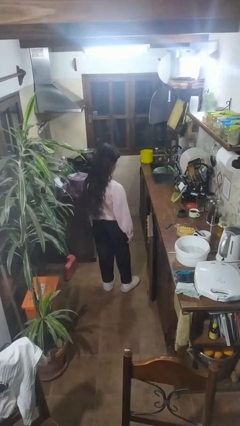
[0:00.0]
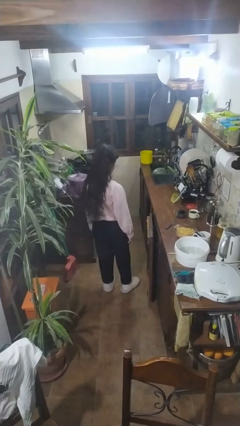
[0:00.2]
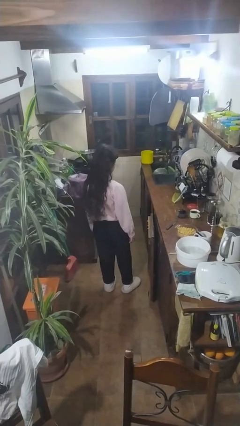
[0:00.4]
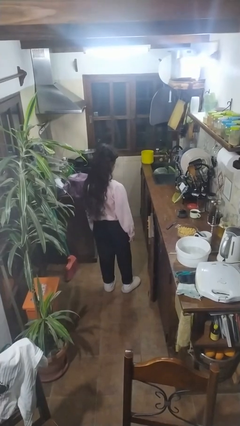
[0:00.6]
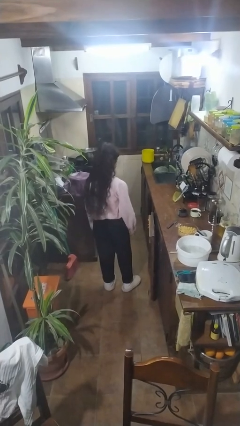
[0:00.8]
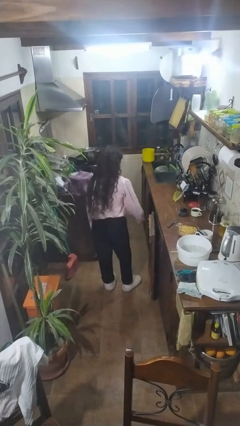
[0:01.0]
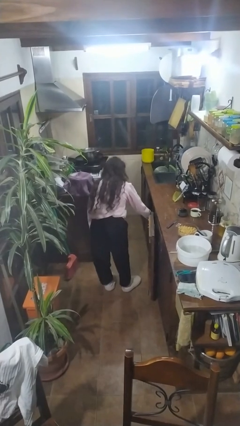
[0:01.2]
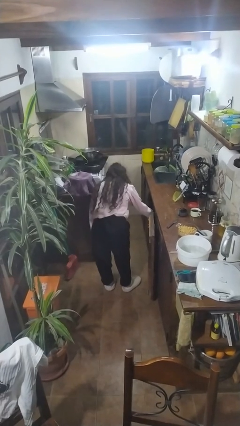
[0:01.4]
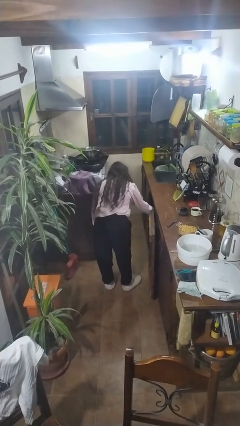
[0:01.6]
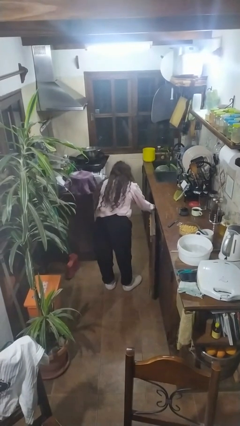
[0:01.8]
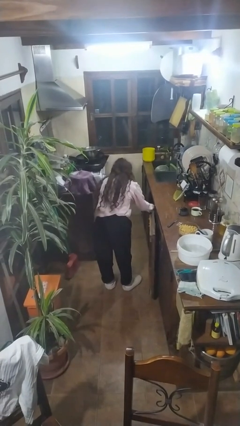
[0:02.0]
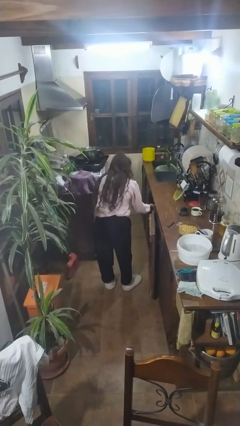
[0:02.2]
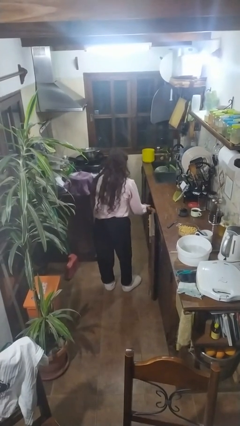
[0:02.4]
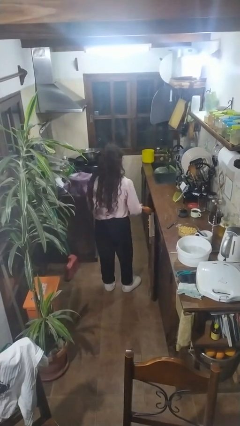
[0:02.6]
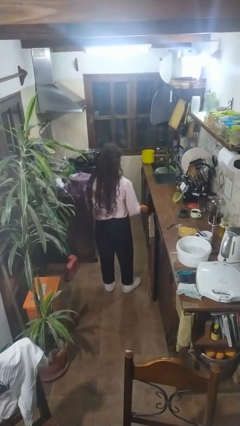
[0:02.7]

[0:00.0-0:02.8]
person takes object from cabinet

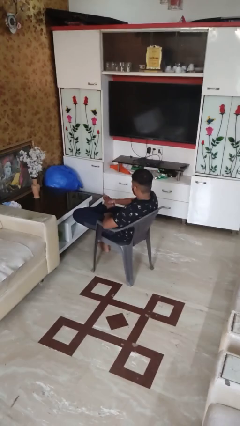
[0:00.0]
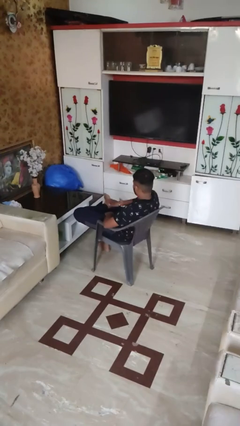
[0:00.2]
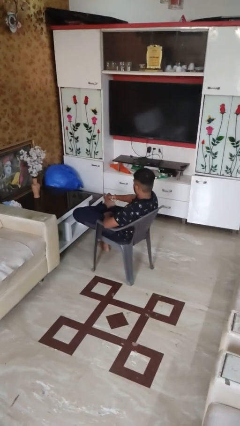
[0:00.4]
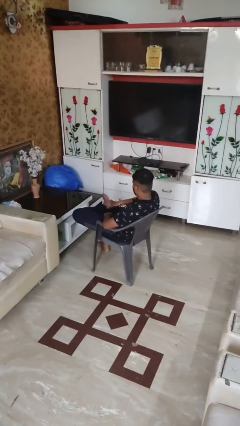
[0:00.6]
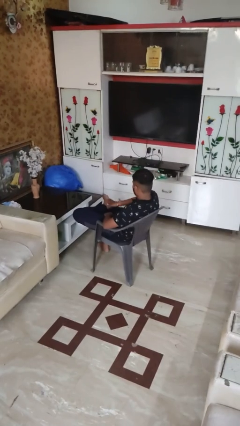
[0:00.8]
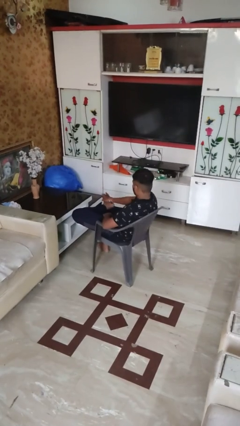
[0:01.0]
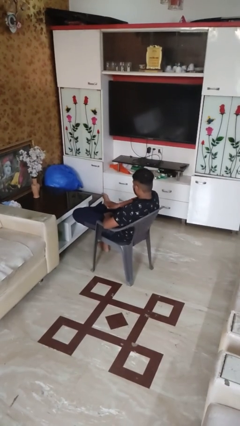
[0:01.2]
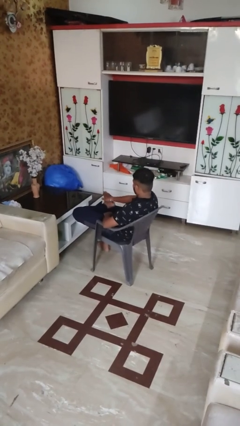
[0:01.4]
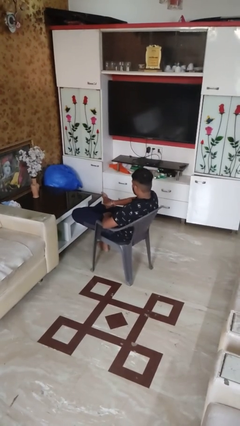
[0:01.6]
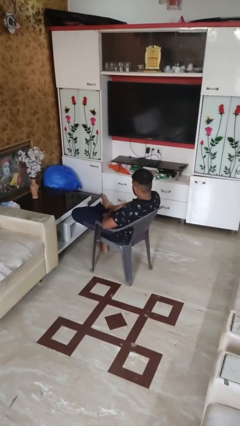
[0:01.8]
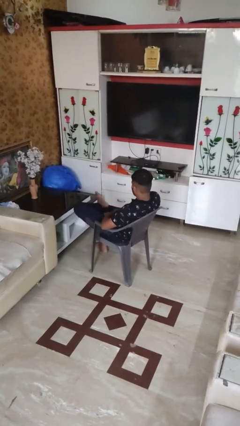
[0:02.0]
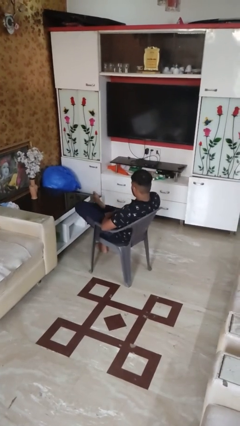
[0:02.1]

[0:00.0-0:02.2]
person rubs foot

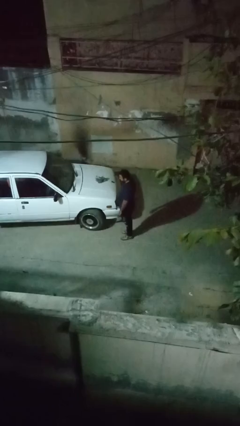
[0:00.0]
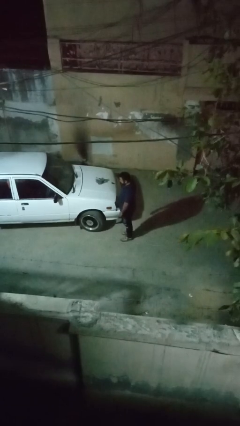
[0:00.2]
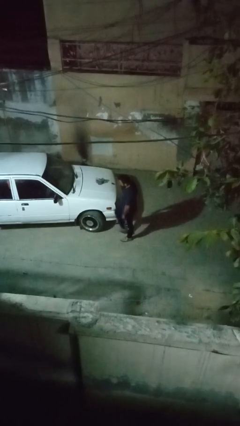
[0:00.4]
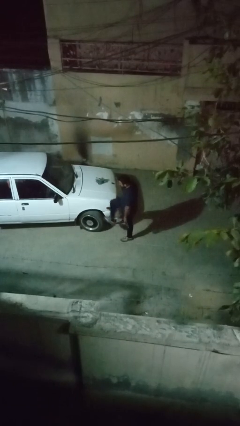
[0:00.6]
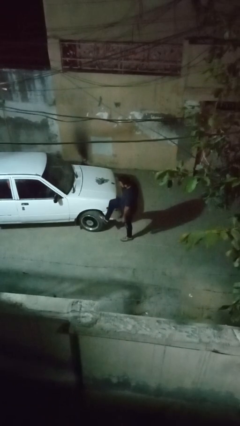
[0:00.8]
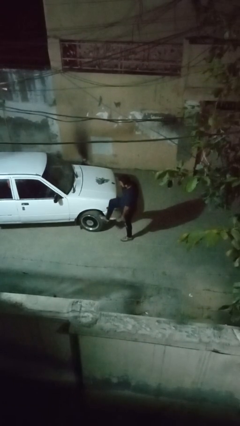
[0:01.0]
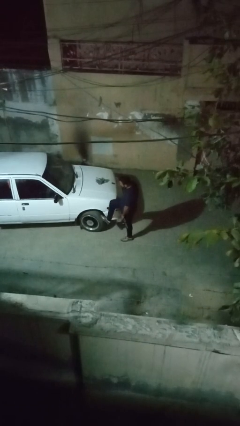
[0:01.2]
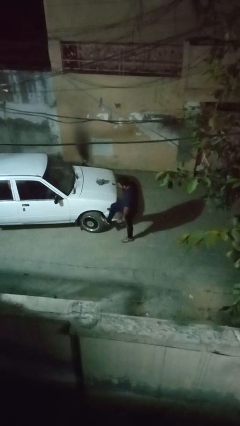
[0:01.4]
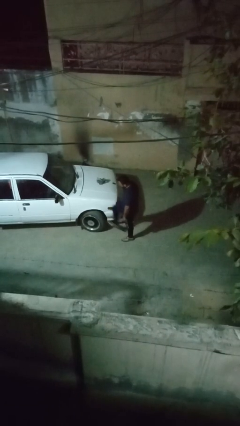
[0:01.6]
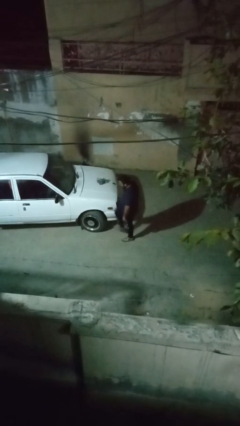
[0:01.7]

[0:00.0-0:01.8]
person kicks car tires

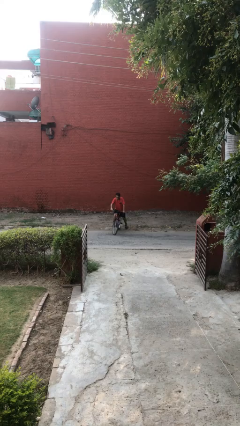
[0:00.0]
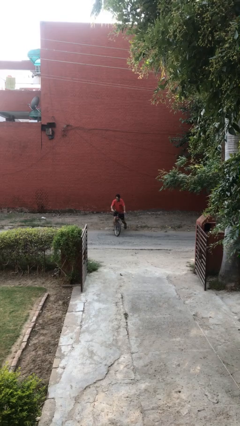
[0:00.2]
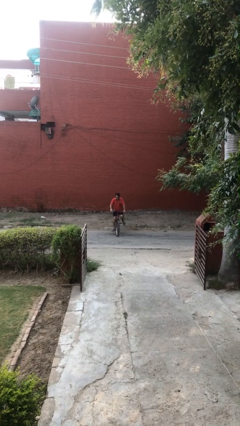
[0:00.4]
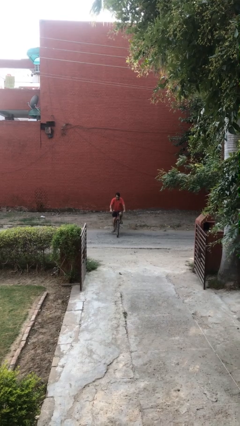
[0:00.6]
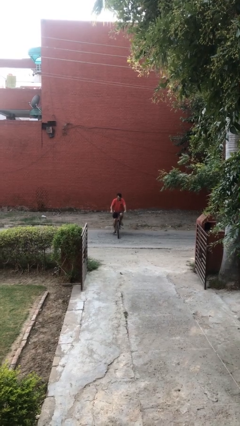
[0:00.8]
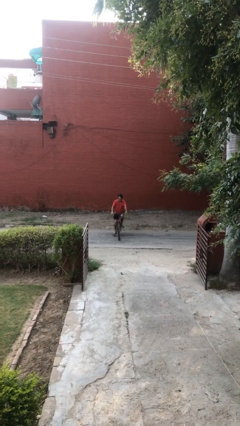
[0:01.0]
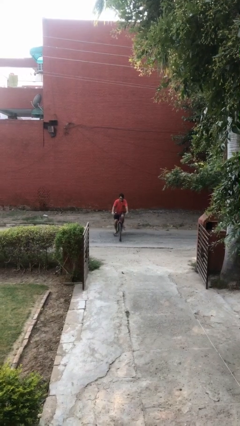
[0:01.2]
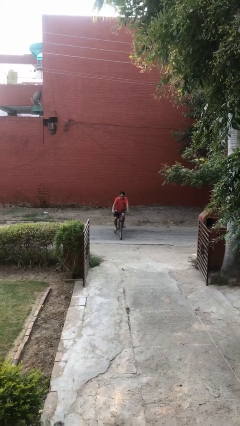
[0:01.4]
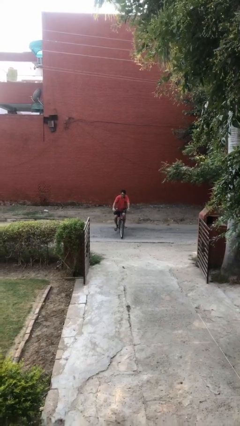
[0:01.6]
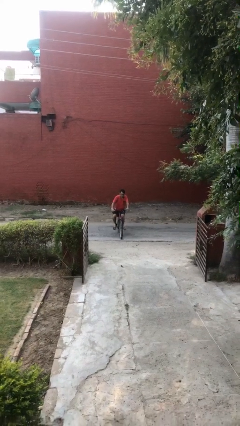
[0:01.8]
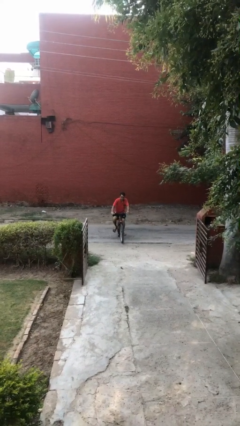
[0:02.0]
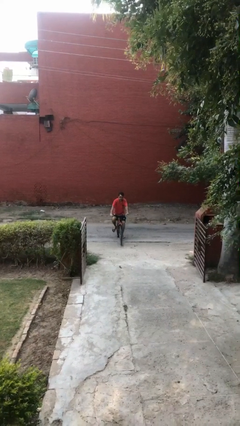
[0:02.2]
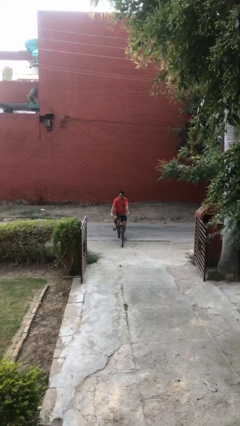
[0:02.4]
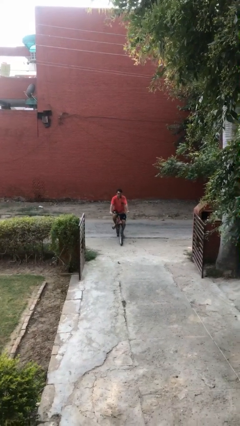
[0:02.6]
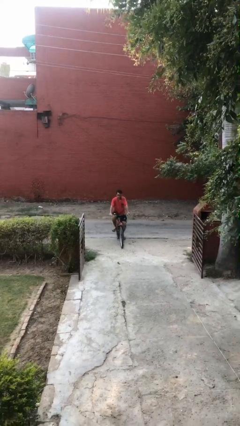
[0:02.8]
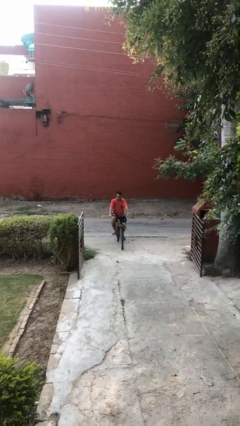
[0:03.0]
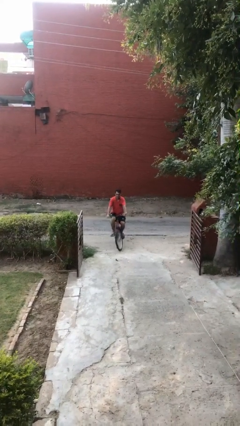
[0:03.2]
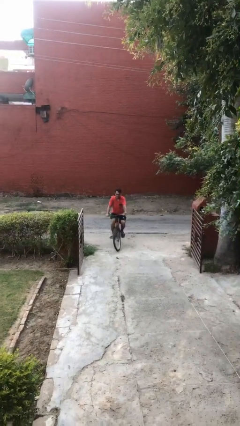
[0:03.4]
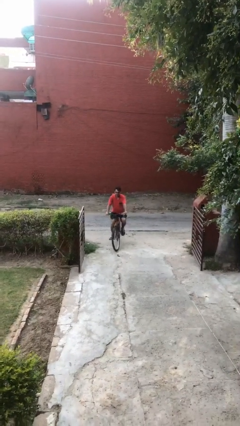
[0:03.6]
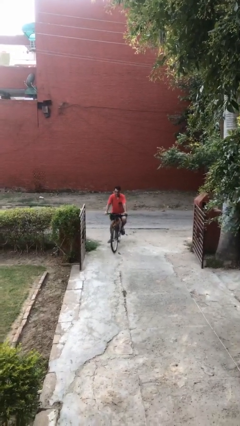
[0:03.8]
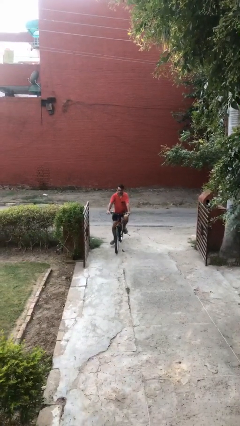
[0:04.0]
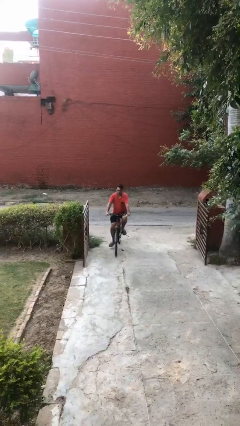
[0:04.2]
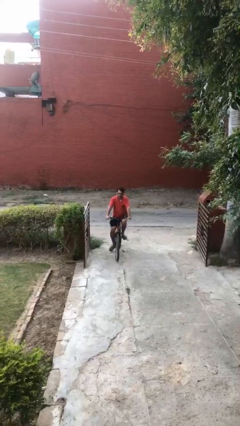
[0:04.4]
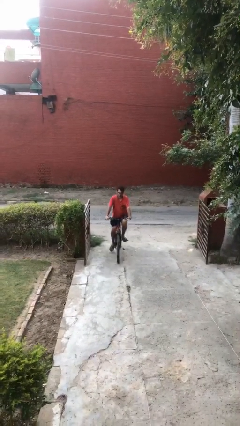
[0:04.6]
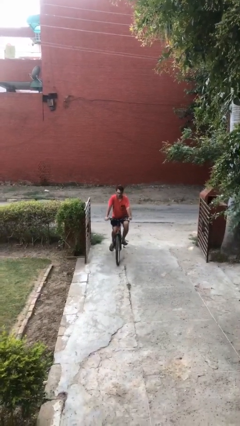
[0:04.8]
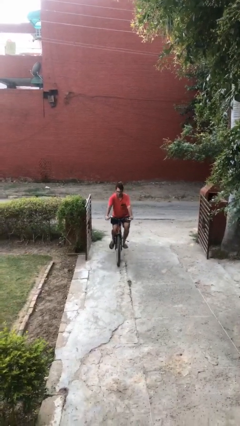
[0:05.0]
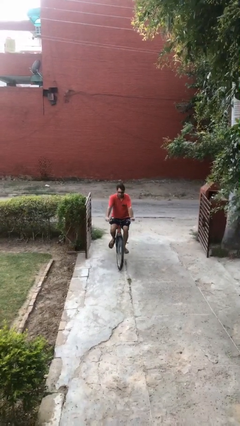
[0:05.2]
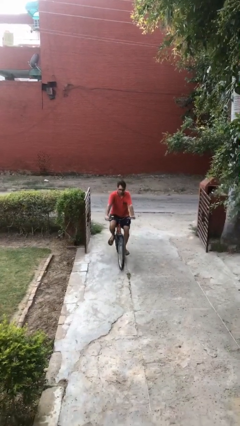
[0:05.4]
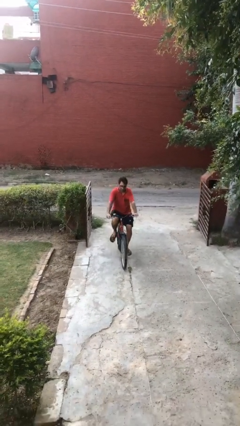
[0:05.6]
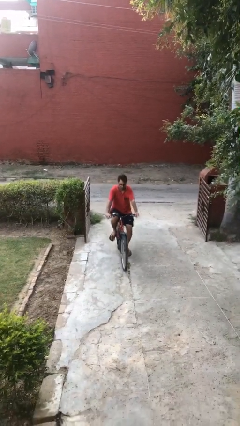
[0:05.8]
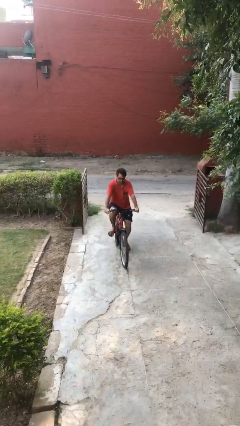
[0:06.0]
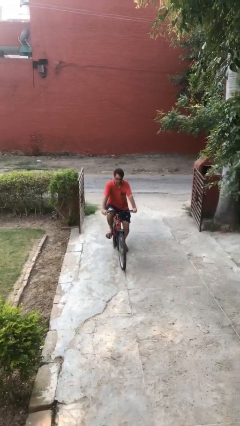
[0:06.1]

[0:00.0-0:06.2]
person rides bicycle

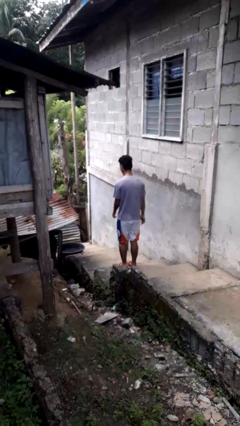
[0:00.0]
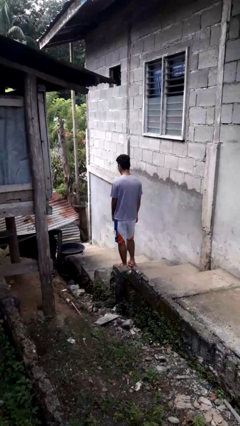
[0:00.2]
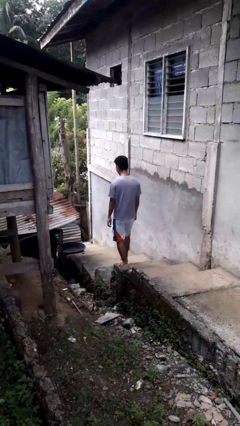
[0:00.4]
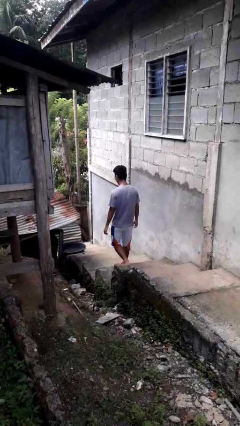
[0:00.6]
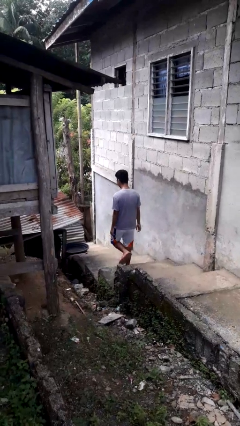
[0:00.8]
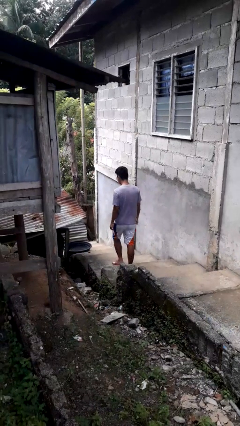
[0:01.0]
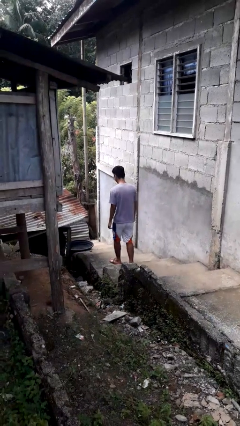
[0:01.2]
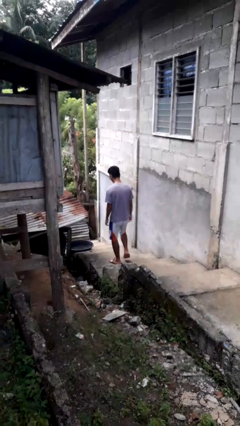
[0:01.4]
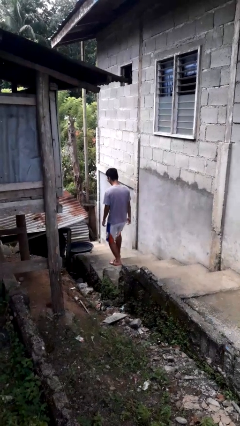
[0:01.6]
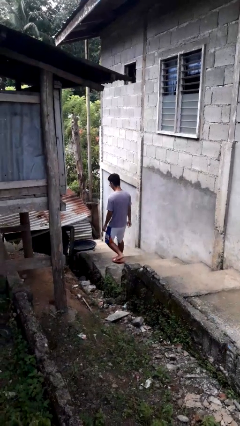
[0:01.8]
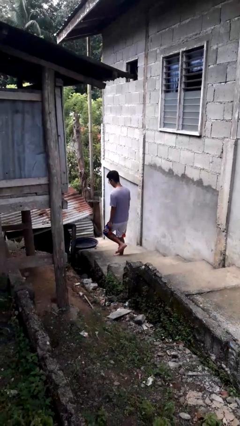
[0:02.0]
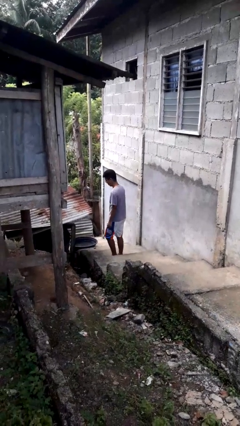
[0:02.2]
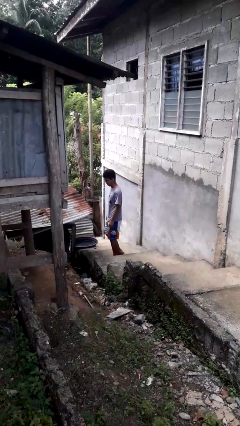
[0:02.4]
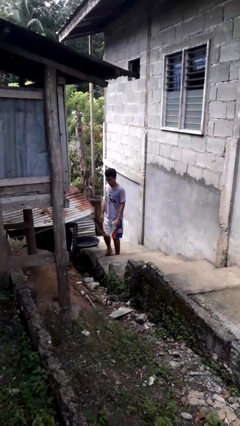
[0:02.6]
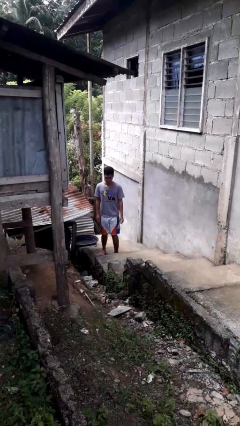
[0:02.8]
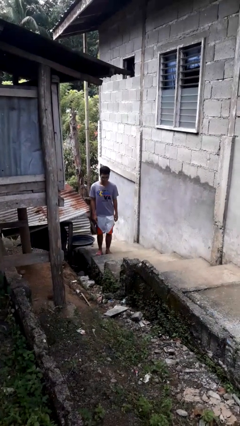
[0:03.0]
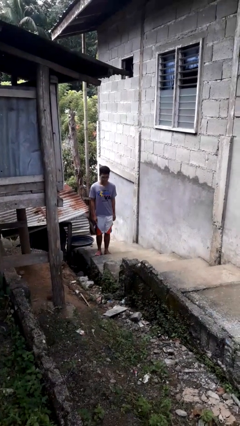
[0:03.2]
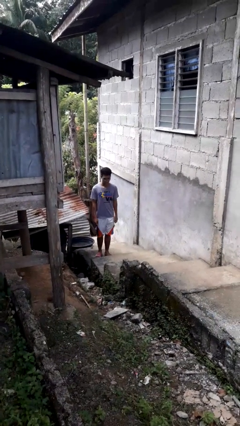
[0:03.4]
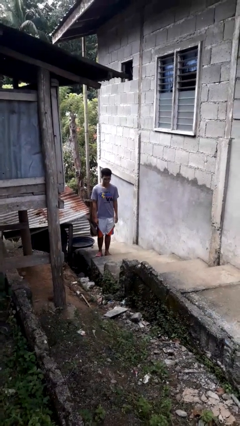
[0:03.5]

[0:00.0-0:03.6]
person climbs down stairs

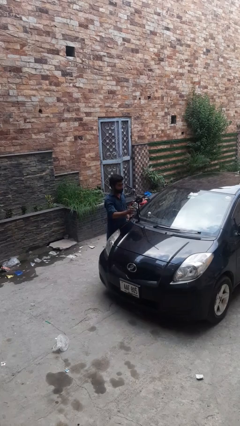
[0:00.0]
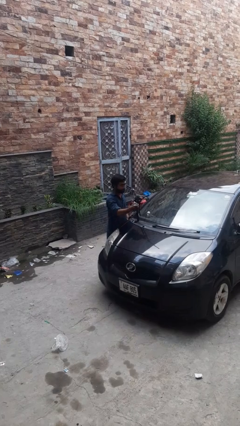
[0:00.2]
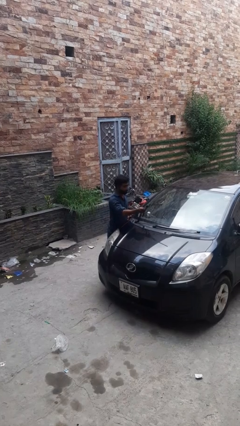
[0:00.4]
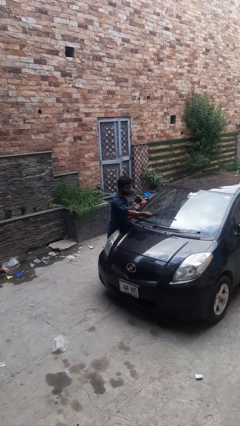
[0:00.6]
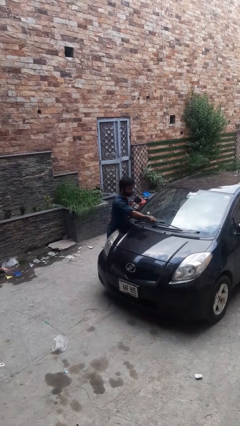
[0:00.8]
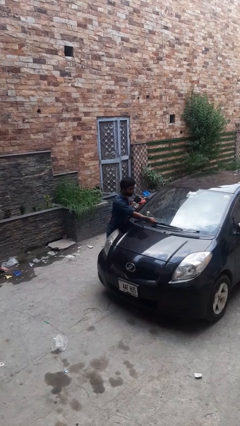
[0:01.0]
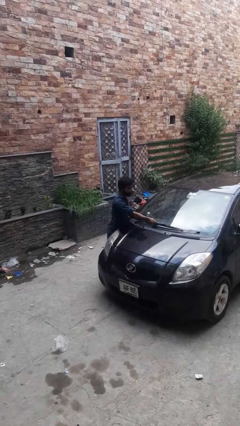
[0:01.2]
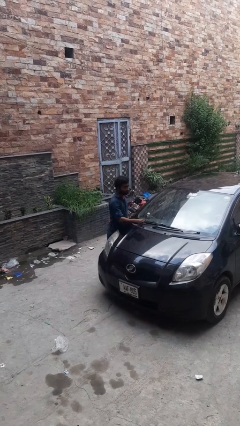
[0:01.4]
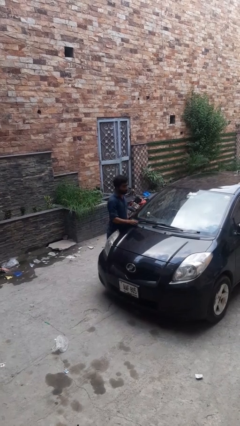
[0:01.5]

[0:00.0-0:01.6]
person flips down car wipers
